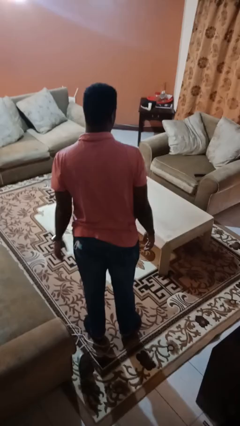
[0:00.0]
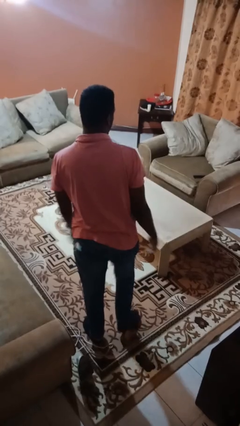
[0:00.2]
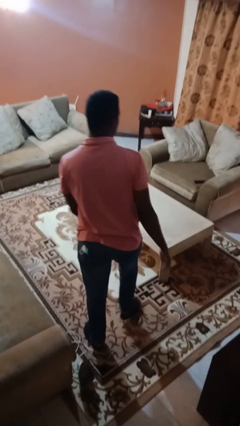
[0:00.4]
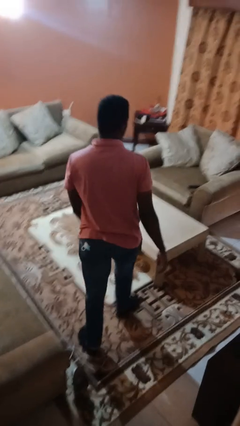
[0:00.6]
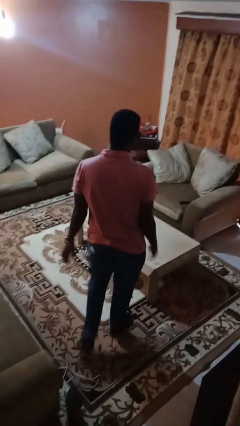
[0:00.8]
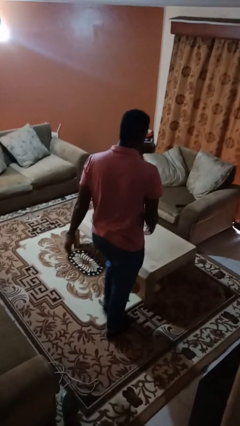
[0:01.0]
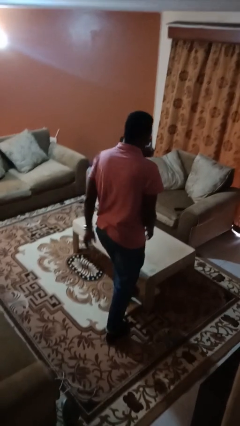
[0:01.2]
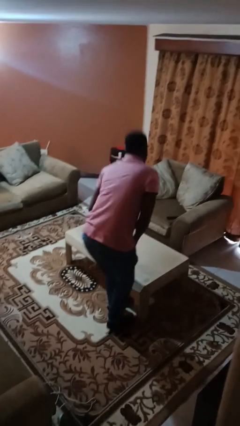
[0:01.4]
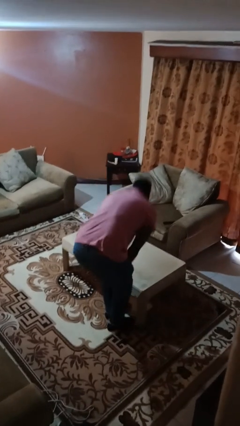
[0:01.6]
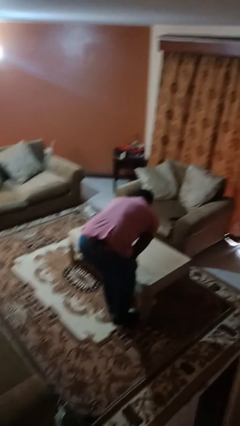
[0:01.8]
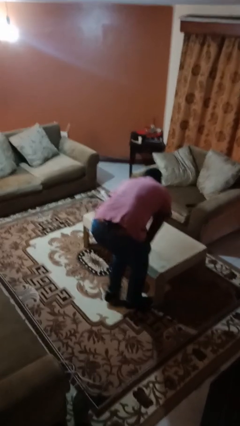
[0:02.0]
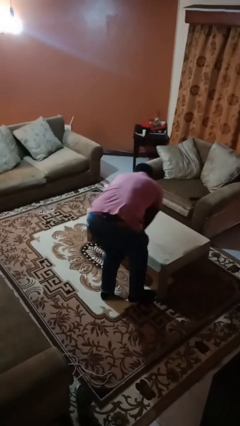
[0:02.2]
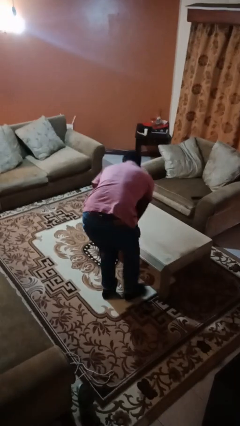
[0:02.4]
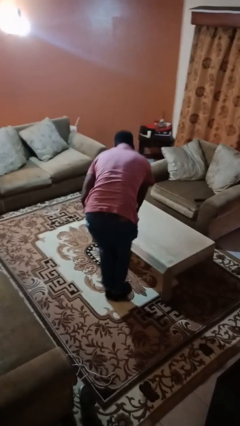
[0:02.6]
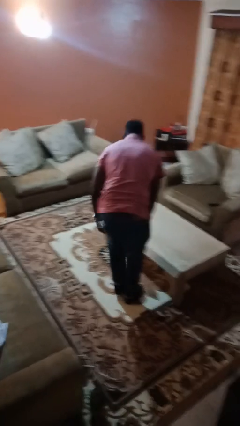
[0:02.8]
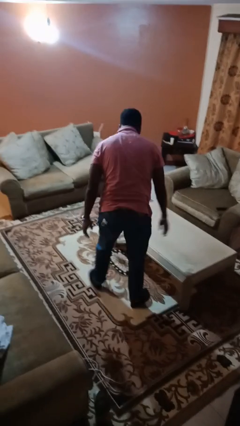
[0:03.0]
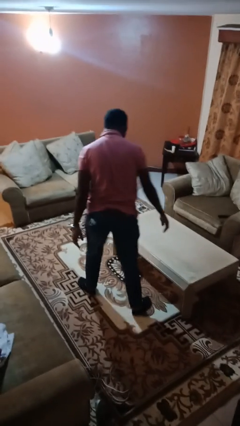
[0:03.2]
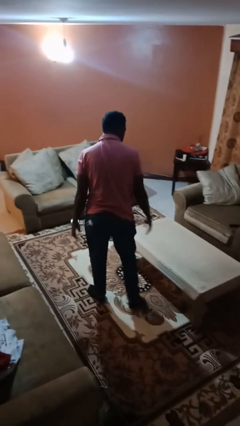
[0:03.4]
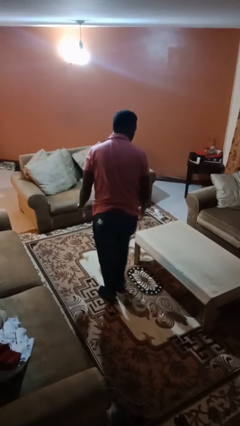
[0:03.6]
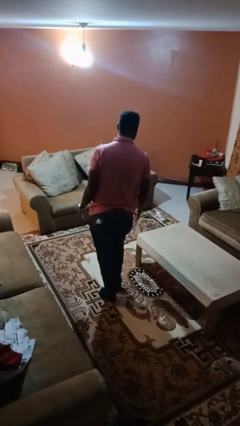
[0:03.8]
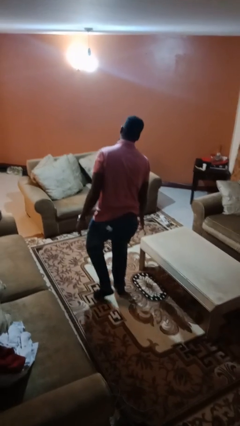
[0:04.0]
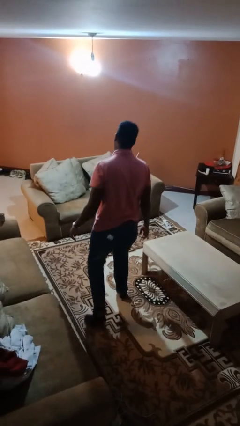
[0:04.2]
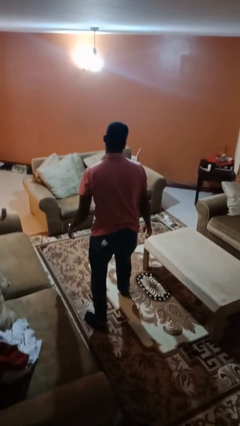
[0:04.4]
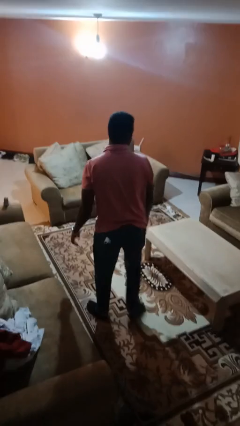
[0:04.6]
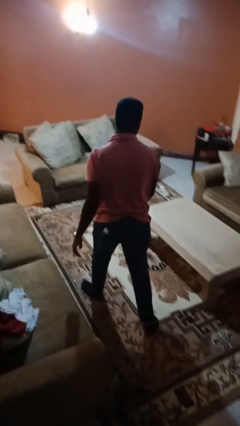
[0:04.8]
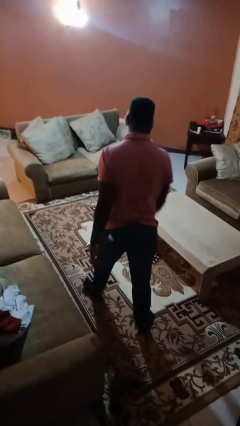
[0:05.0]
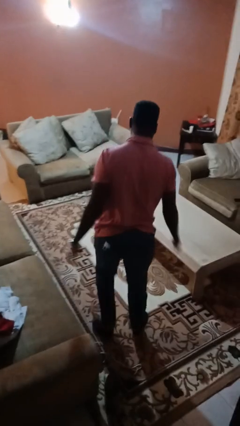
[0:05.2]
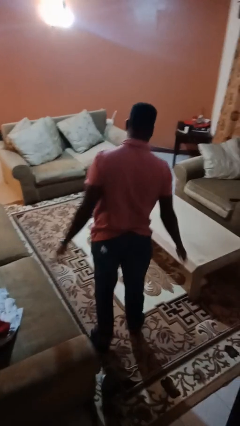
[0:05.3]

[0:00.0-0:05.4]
person bumps into table

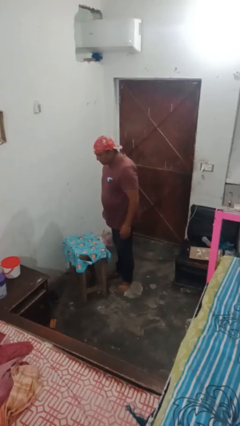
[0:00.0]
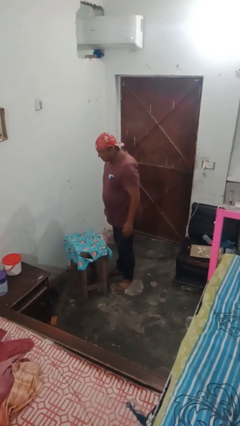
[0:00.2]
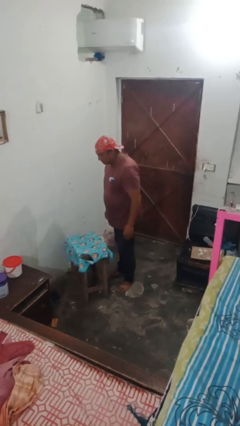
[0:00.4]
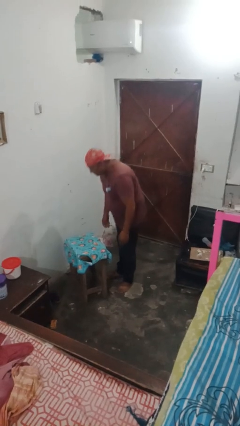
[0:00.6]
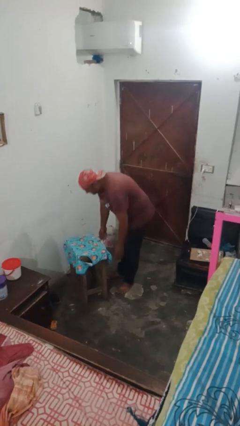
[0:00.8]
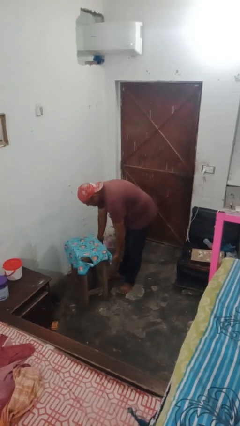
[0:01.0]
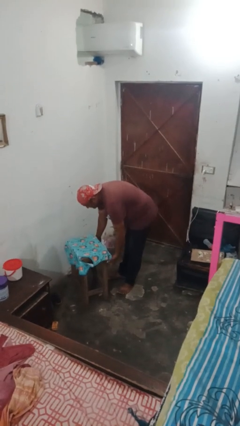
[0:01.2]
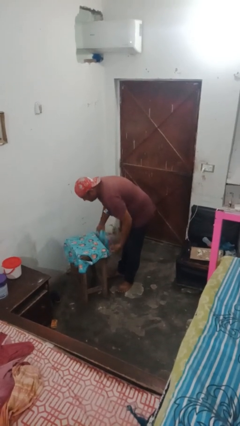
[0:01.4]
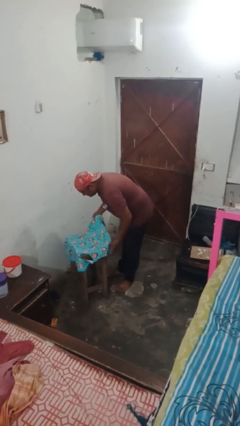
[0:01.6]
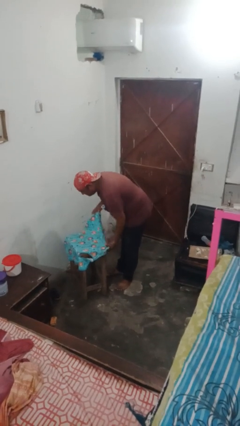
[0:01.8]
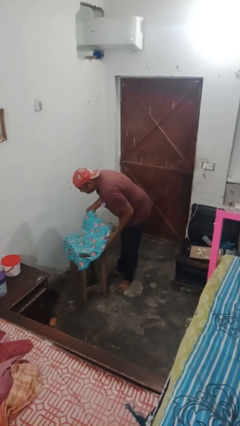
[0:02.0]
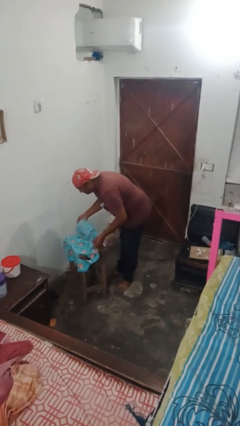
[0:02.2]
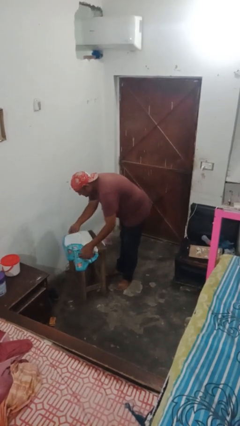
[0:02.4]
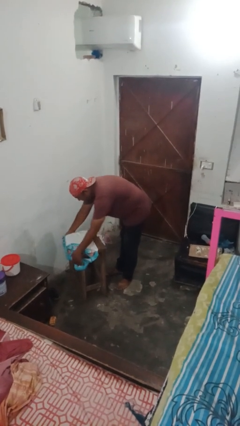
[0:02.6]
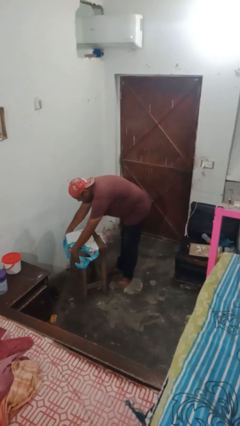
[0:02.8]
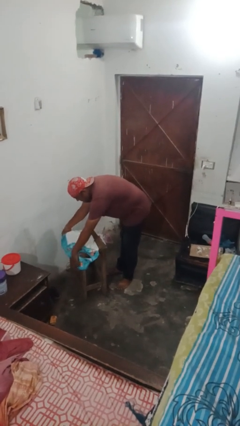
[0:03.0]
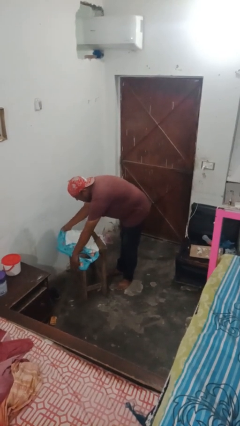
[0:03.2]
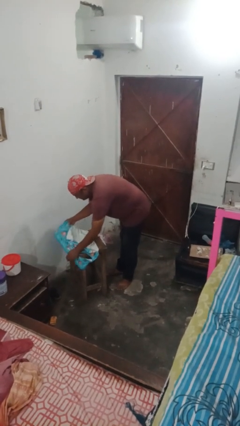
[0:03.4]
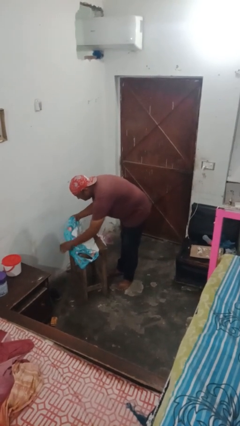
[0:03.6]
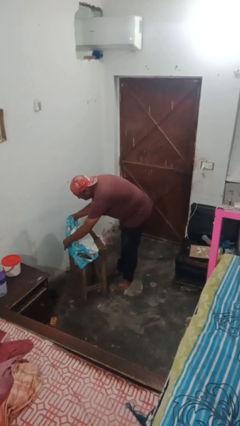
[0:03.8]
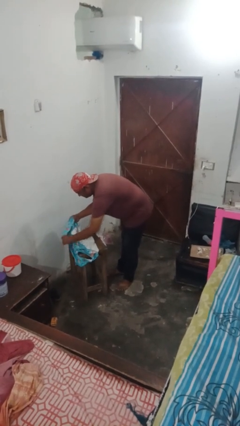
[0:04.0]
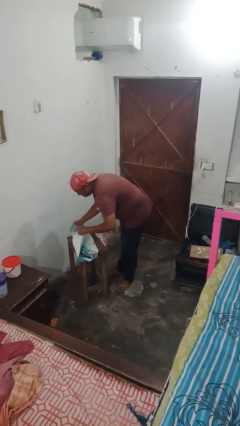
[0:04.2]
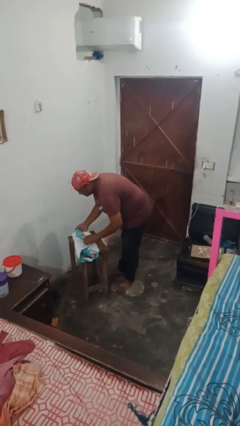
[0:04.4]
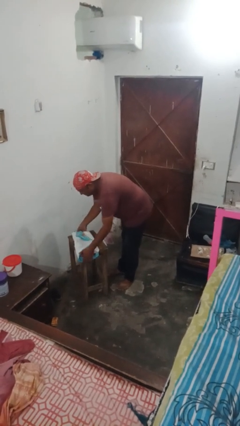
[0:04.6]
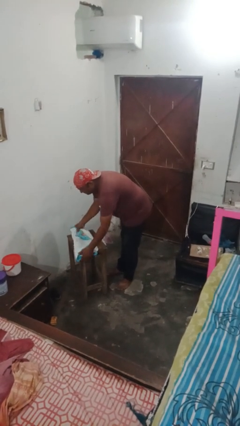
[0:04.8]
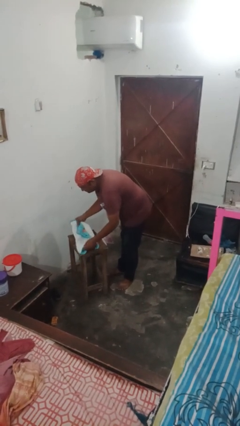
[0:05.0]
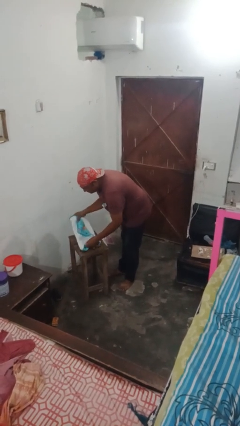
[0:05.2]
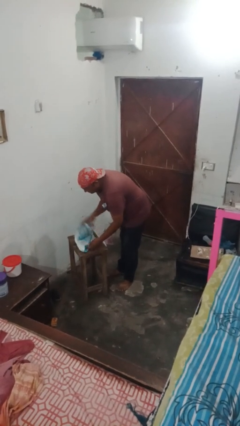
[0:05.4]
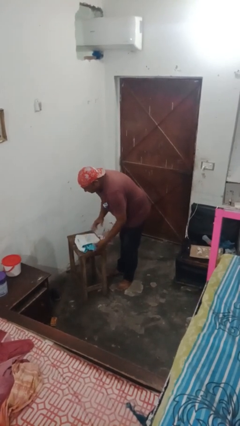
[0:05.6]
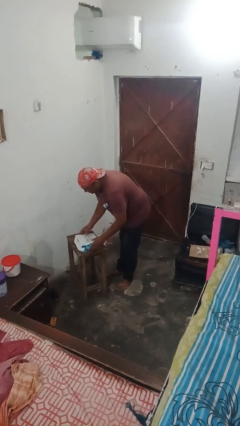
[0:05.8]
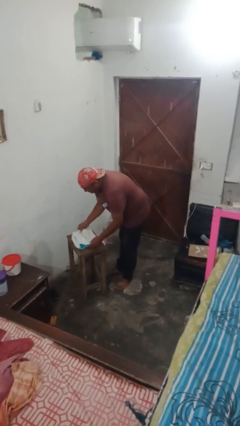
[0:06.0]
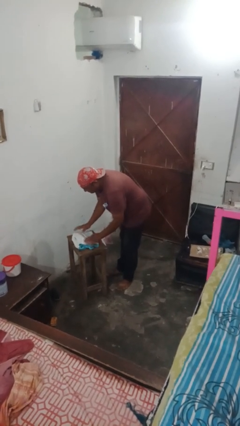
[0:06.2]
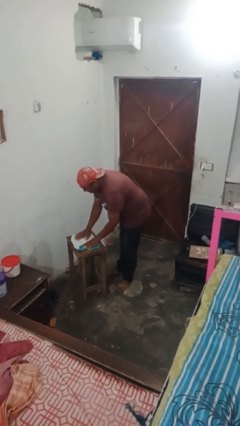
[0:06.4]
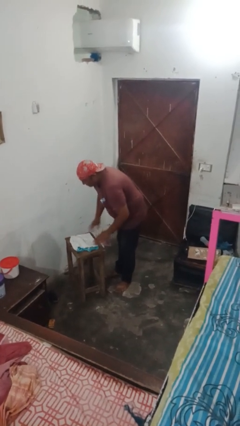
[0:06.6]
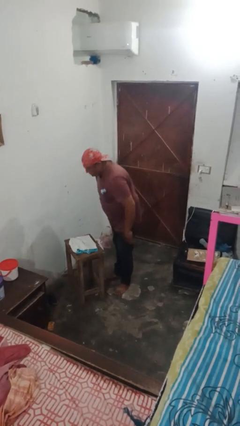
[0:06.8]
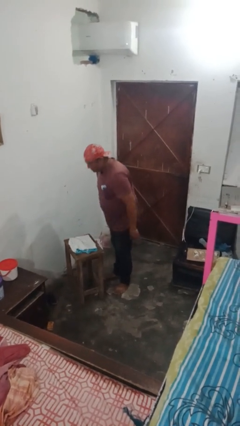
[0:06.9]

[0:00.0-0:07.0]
person spreads tablecloth

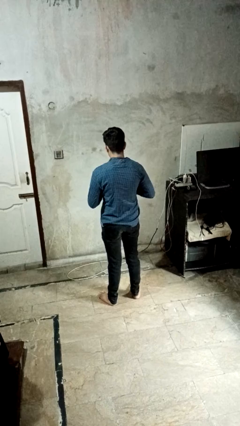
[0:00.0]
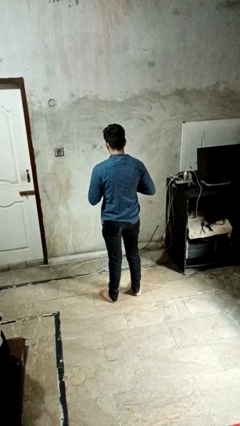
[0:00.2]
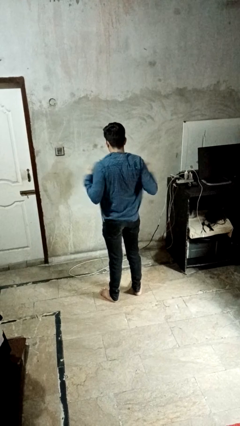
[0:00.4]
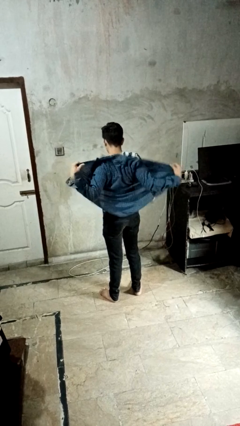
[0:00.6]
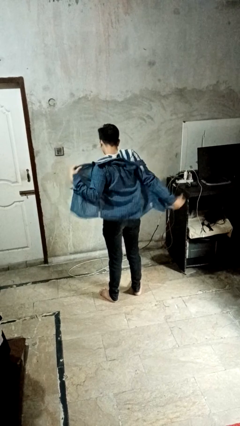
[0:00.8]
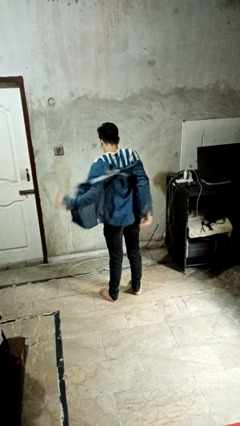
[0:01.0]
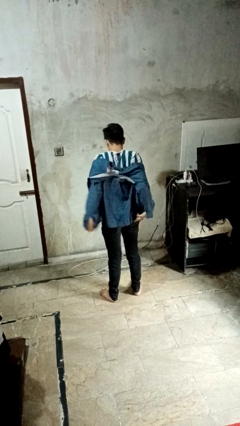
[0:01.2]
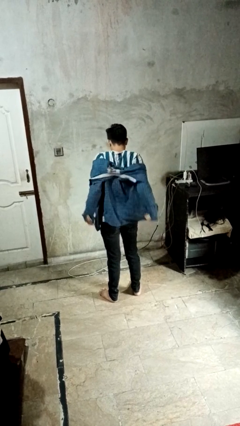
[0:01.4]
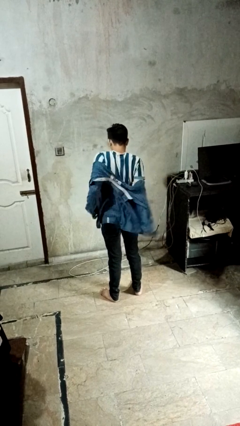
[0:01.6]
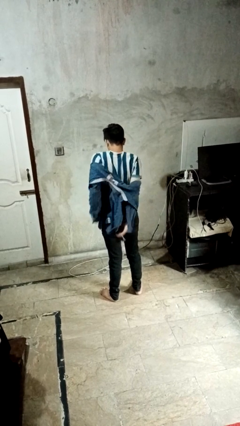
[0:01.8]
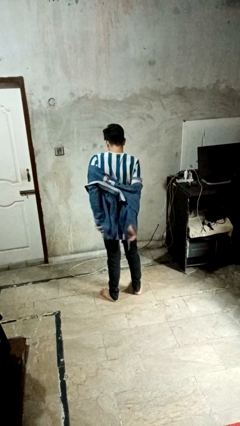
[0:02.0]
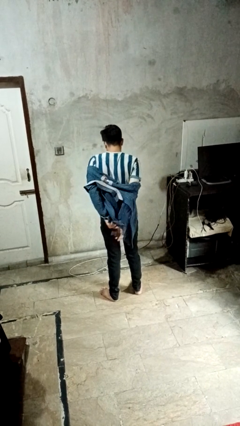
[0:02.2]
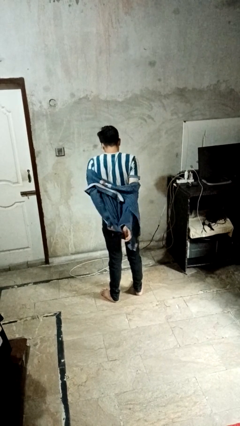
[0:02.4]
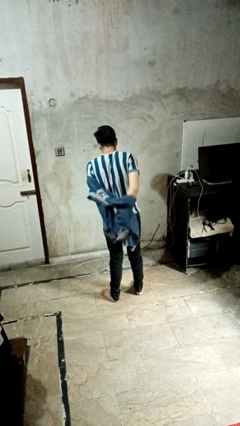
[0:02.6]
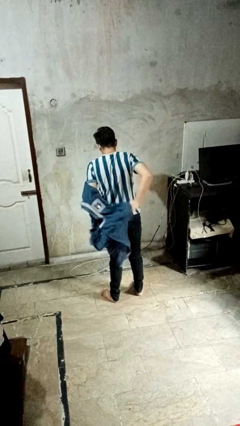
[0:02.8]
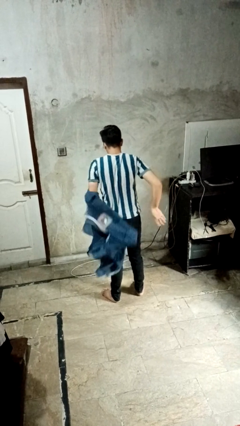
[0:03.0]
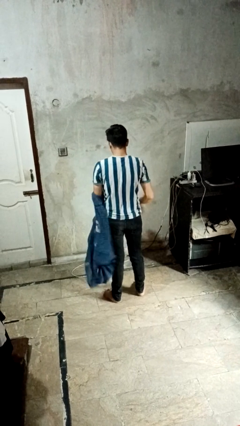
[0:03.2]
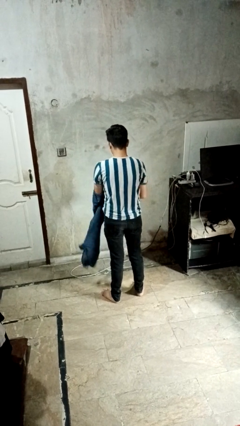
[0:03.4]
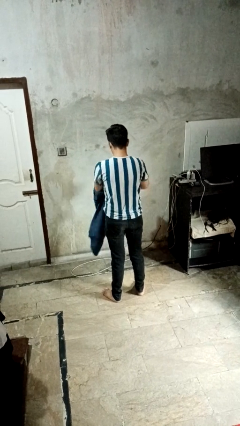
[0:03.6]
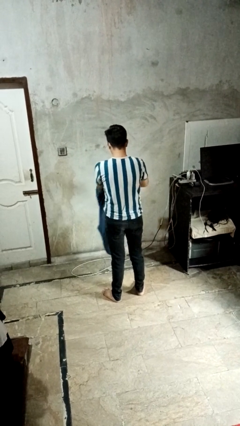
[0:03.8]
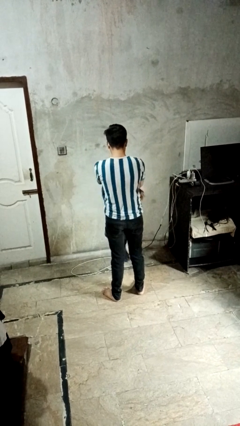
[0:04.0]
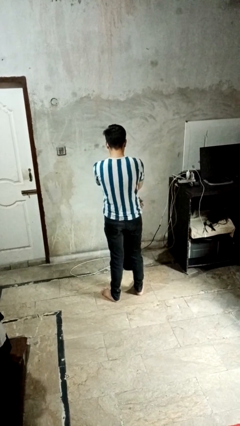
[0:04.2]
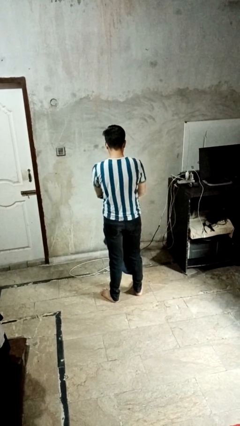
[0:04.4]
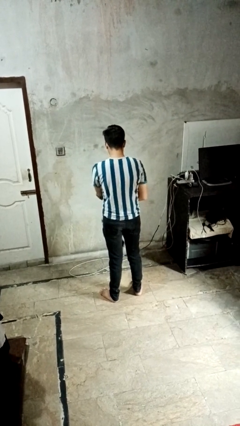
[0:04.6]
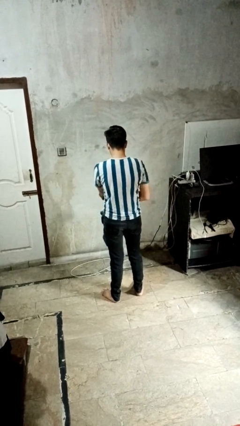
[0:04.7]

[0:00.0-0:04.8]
person takes off shirt

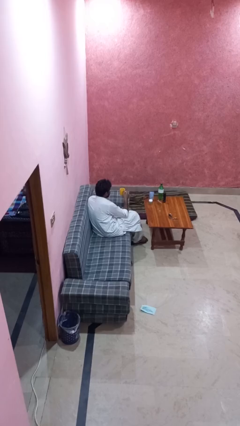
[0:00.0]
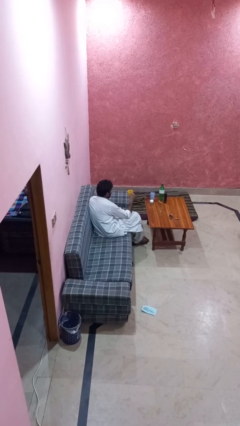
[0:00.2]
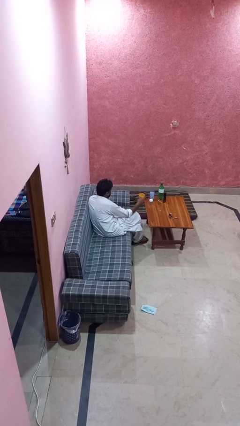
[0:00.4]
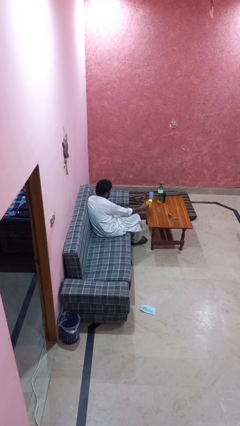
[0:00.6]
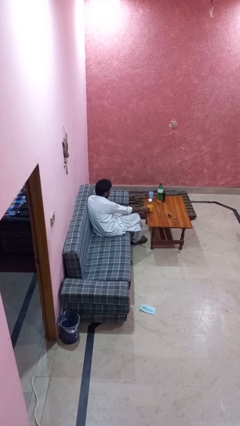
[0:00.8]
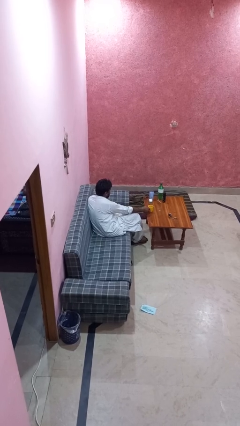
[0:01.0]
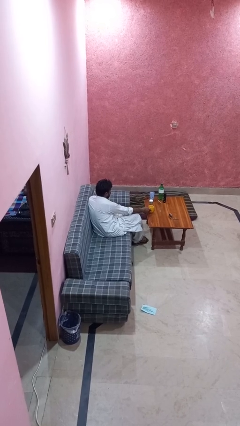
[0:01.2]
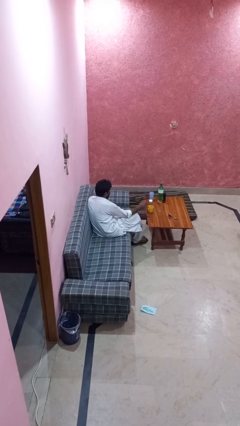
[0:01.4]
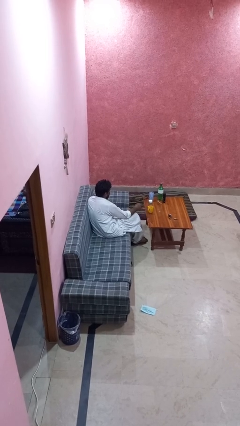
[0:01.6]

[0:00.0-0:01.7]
person puts down object on table
